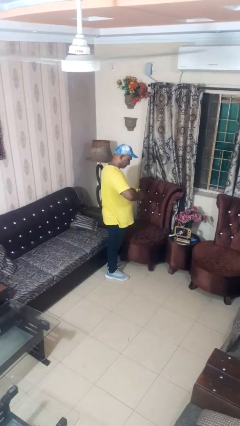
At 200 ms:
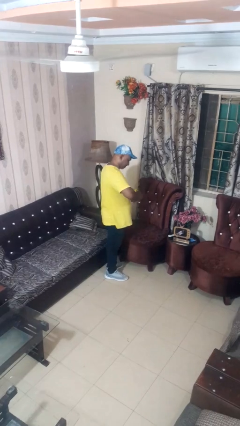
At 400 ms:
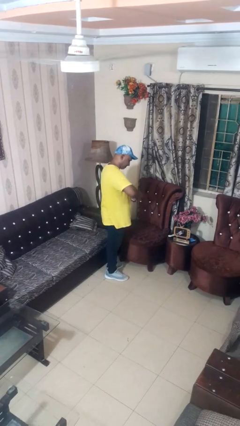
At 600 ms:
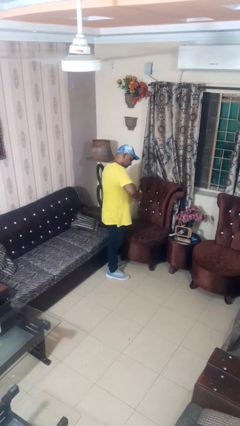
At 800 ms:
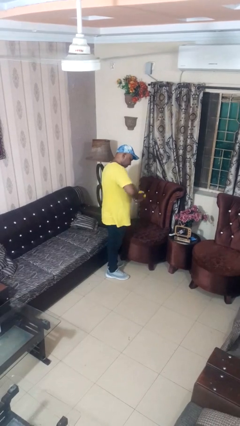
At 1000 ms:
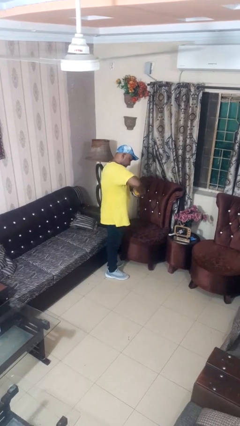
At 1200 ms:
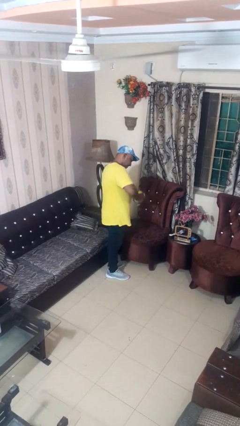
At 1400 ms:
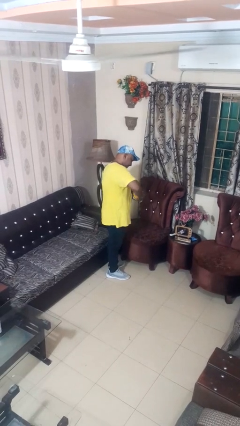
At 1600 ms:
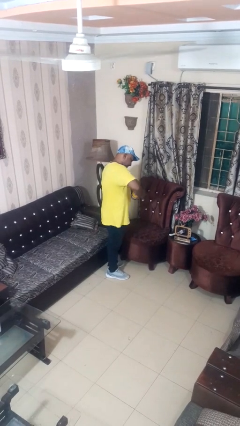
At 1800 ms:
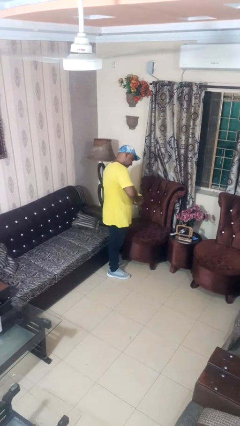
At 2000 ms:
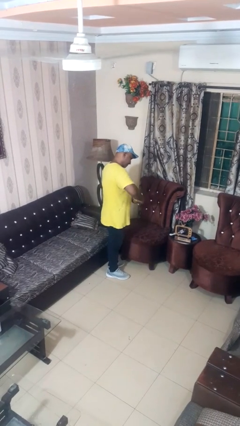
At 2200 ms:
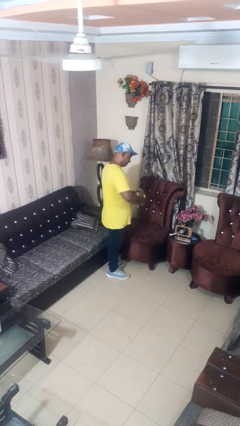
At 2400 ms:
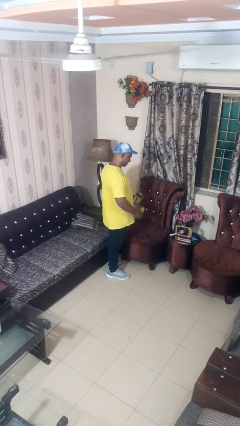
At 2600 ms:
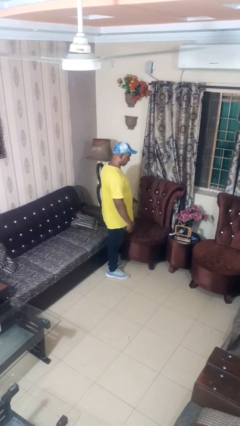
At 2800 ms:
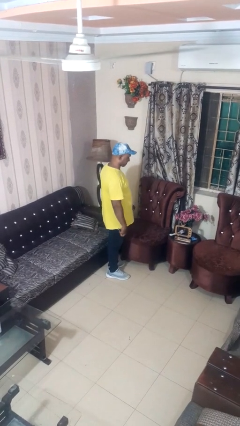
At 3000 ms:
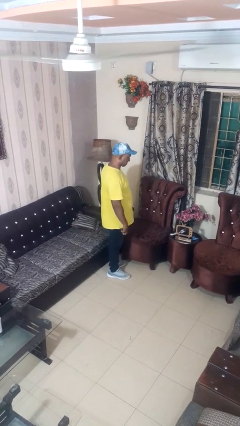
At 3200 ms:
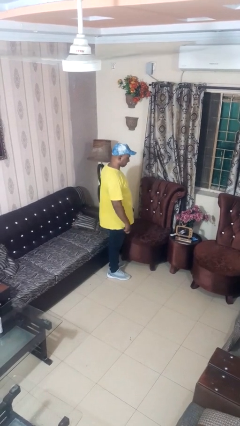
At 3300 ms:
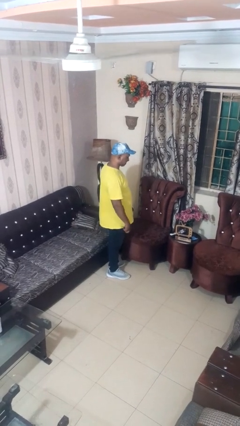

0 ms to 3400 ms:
person opens can with can opener

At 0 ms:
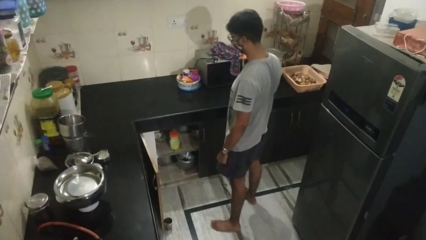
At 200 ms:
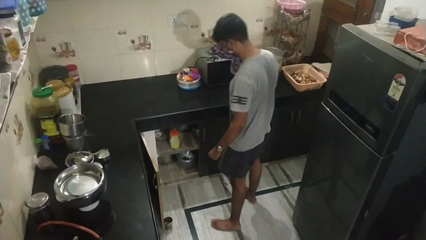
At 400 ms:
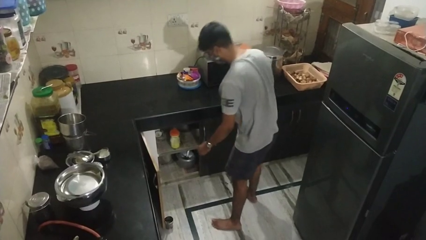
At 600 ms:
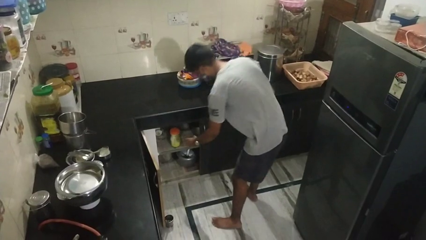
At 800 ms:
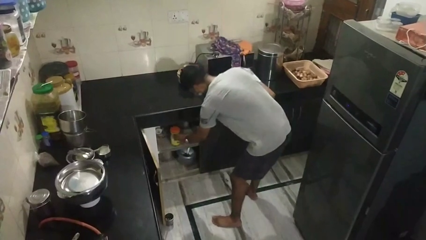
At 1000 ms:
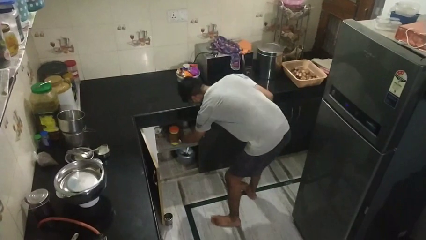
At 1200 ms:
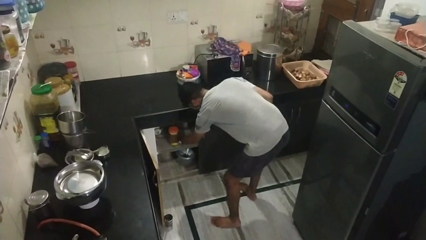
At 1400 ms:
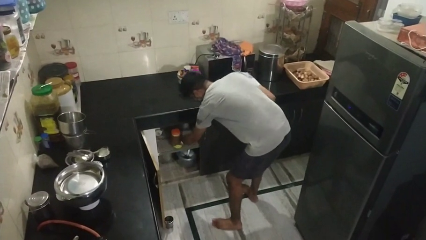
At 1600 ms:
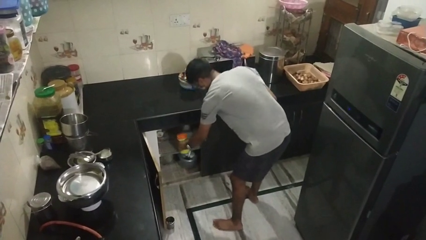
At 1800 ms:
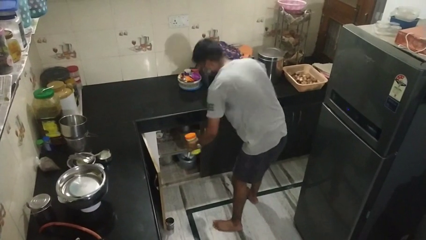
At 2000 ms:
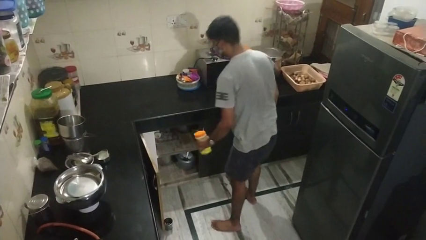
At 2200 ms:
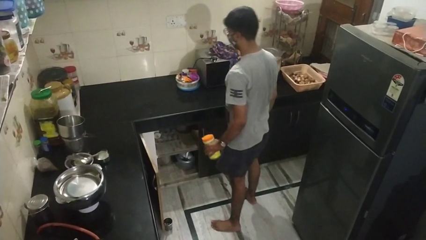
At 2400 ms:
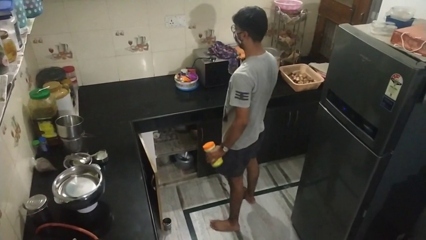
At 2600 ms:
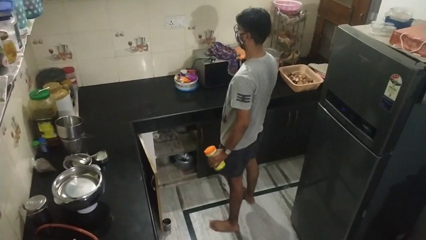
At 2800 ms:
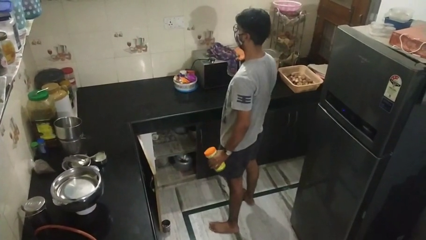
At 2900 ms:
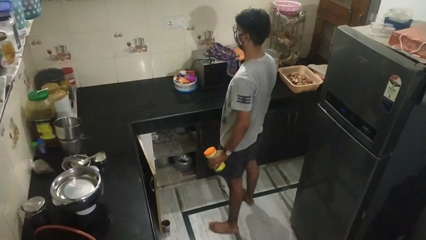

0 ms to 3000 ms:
person picks up object from cabinet

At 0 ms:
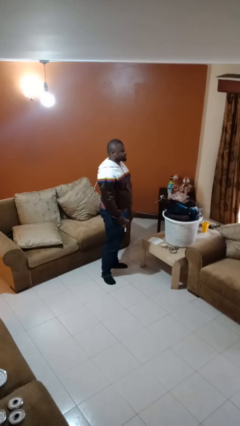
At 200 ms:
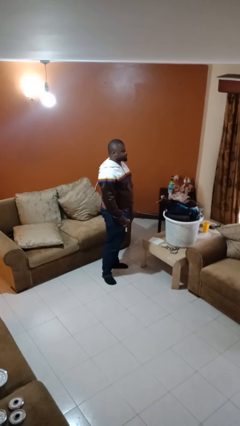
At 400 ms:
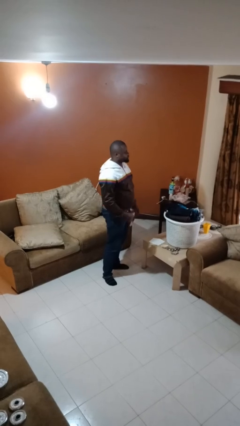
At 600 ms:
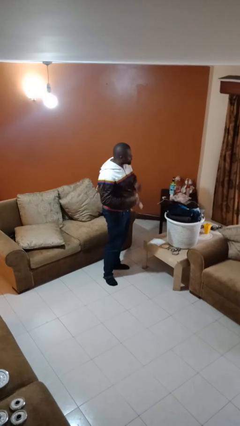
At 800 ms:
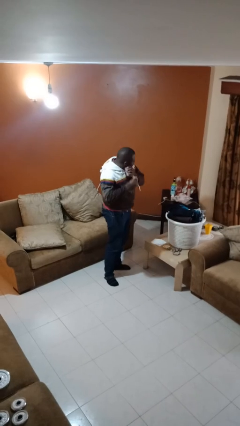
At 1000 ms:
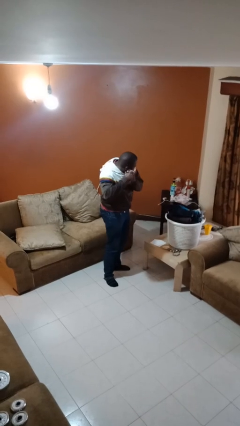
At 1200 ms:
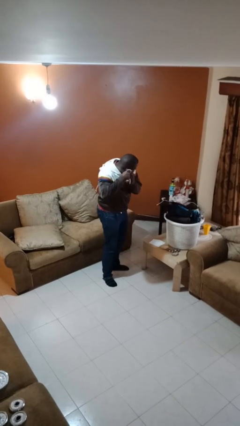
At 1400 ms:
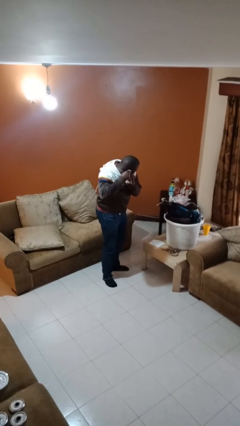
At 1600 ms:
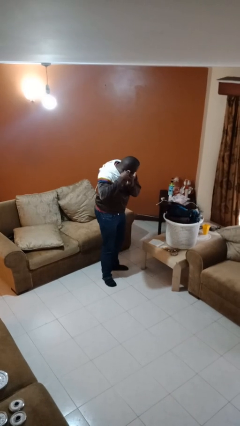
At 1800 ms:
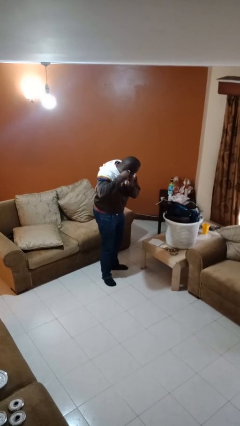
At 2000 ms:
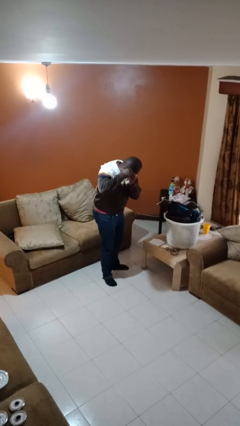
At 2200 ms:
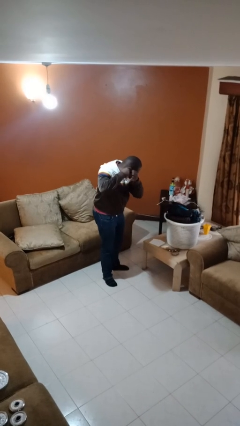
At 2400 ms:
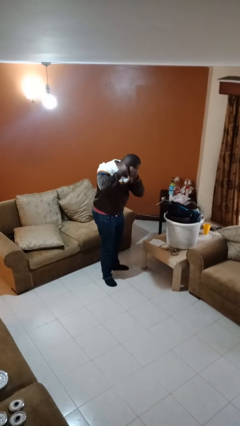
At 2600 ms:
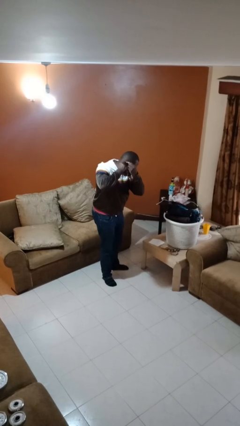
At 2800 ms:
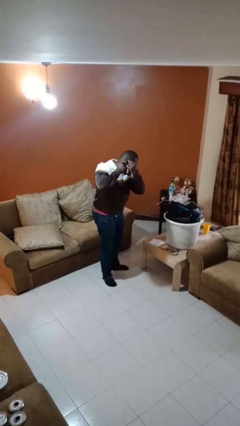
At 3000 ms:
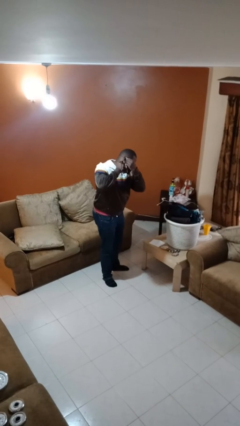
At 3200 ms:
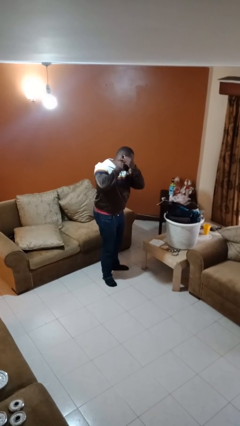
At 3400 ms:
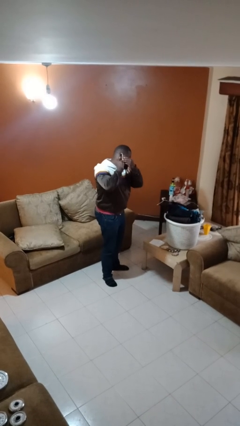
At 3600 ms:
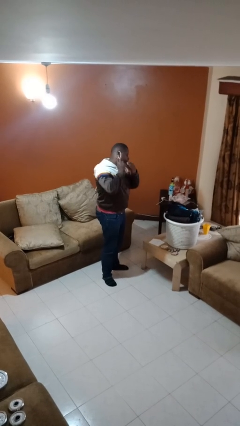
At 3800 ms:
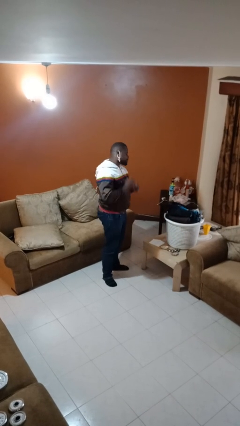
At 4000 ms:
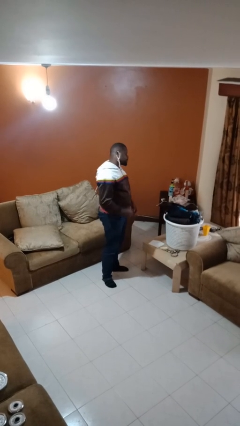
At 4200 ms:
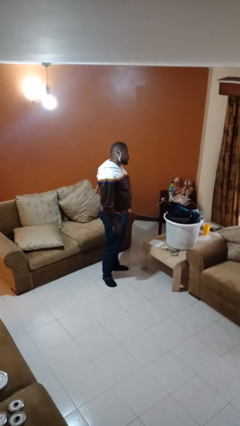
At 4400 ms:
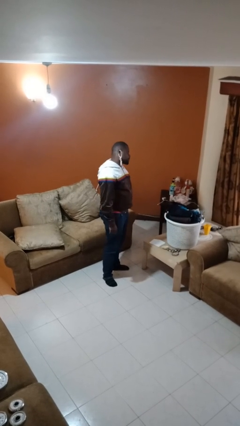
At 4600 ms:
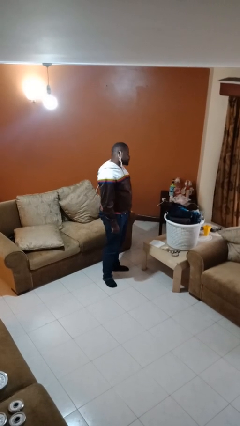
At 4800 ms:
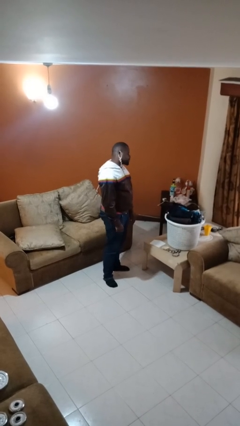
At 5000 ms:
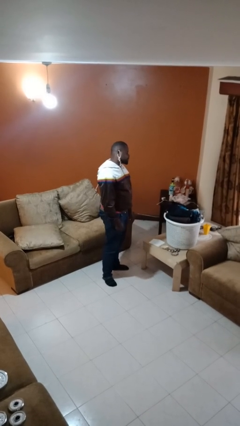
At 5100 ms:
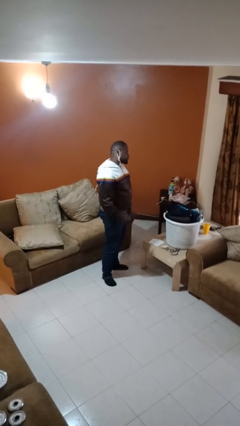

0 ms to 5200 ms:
person puts on earrings

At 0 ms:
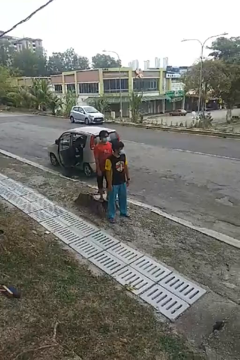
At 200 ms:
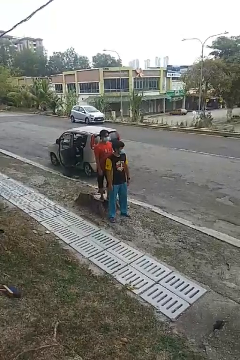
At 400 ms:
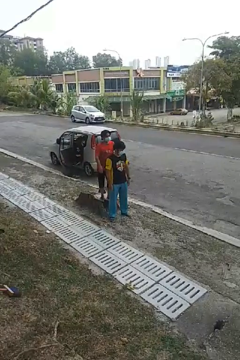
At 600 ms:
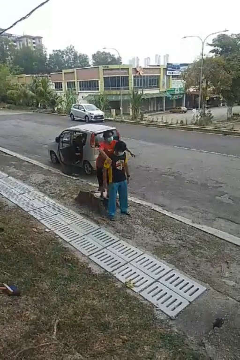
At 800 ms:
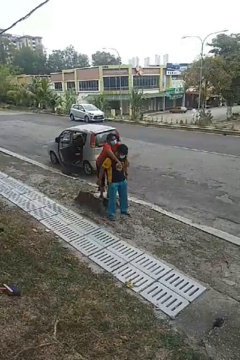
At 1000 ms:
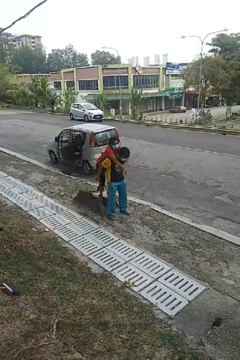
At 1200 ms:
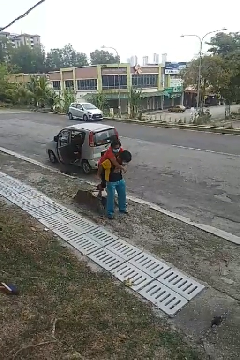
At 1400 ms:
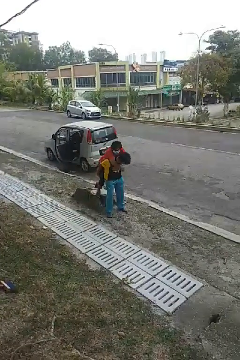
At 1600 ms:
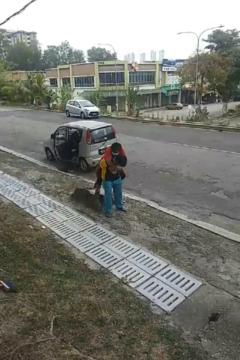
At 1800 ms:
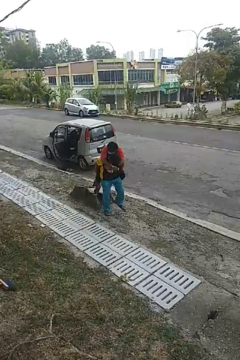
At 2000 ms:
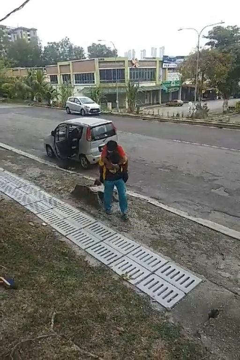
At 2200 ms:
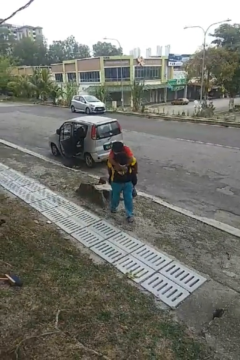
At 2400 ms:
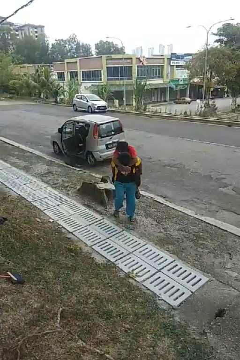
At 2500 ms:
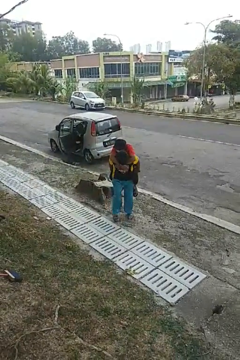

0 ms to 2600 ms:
person carries person over shoulder

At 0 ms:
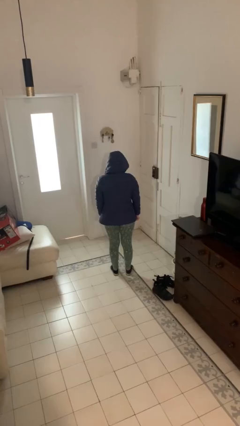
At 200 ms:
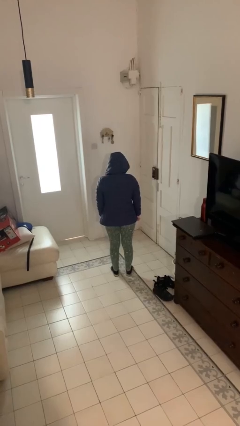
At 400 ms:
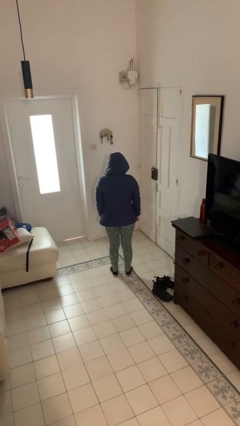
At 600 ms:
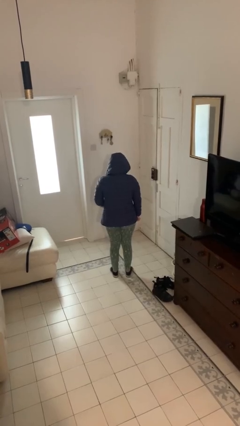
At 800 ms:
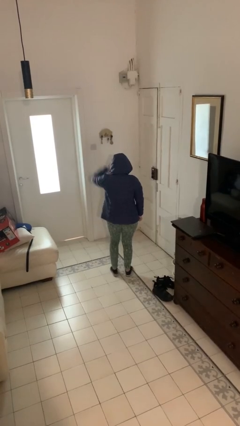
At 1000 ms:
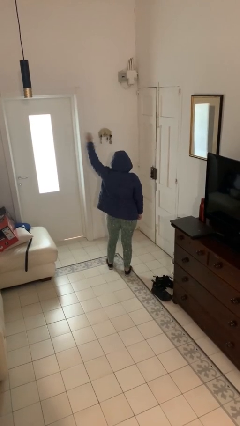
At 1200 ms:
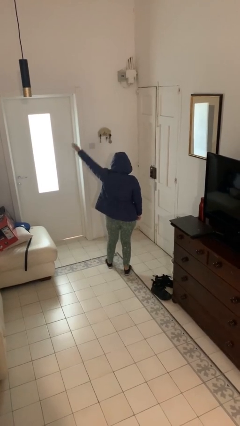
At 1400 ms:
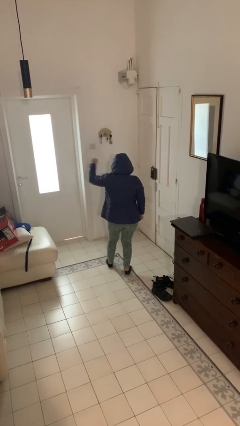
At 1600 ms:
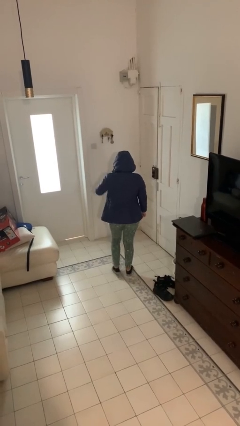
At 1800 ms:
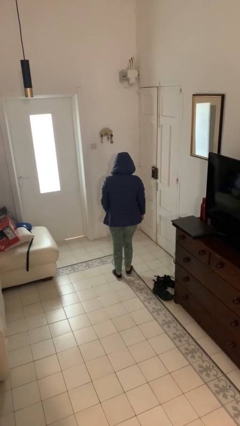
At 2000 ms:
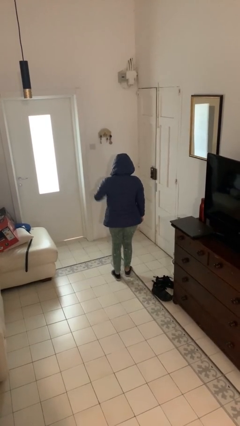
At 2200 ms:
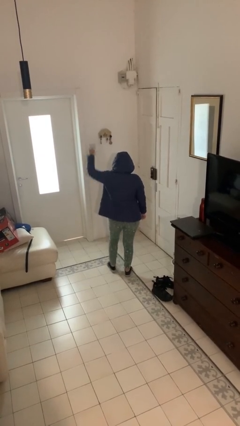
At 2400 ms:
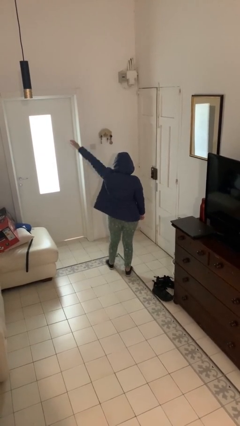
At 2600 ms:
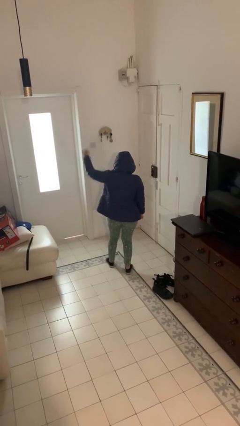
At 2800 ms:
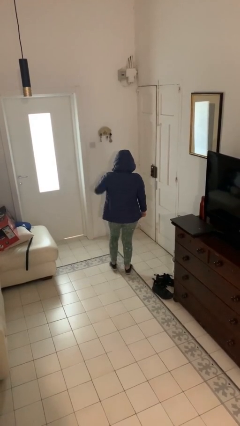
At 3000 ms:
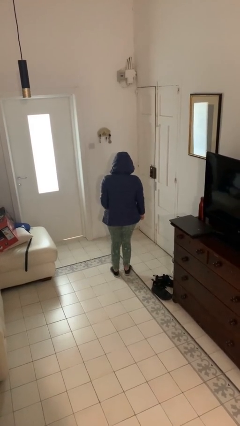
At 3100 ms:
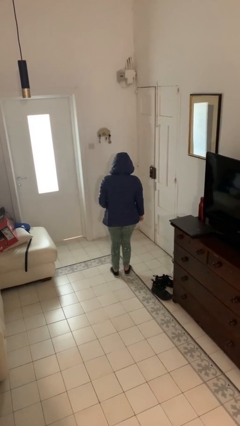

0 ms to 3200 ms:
person dances in place

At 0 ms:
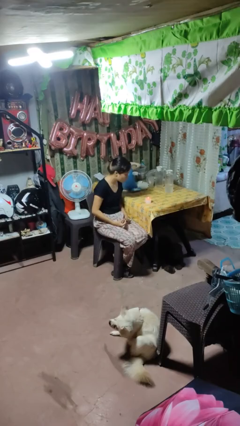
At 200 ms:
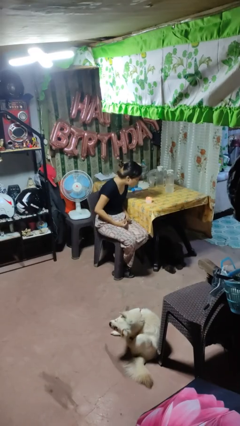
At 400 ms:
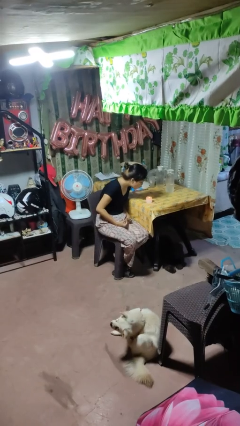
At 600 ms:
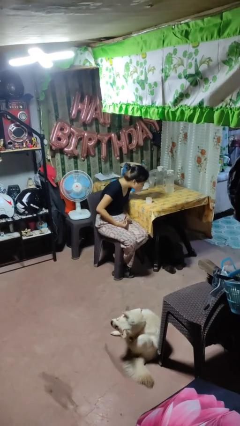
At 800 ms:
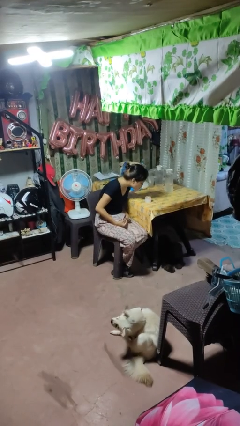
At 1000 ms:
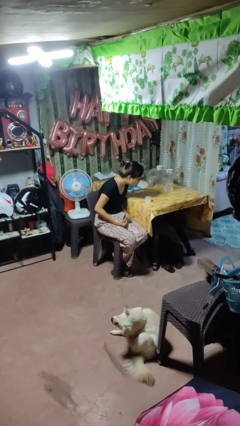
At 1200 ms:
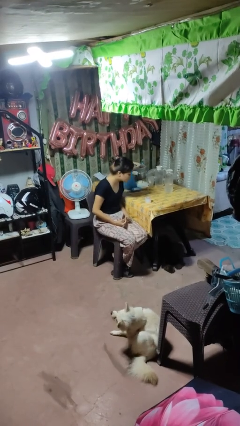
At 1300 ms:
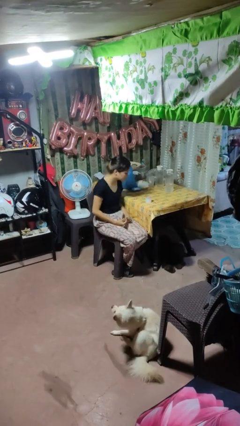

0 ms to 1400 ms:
person extinguishes candle
